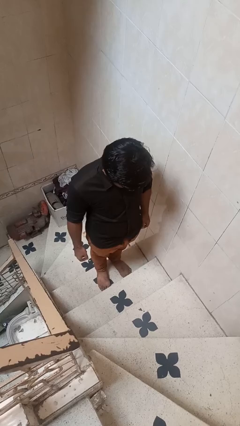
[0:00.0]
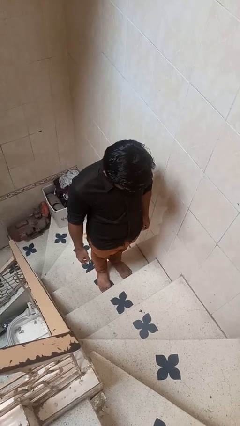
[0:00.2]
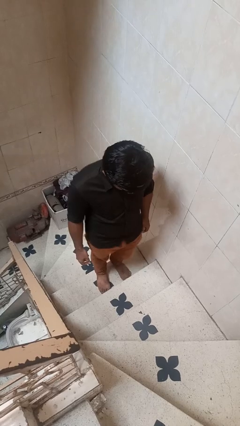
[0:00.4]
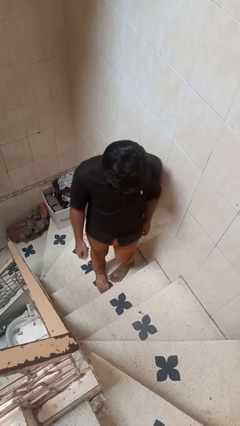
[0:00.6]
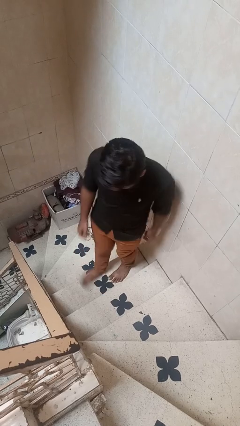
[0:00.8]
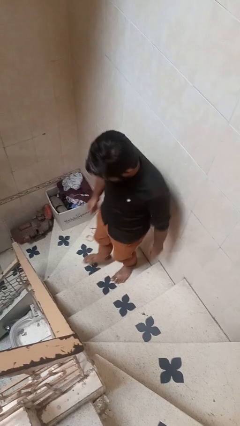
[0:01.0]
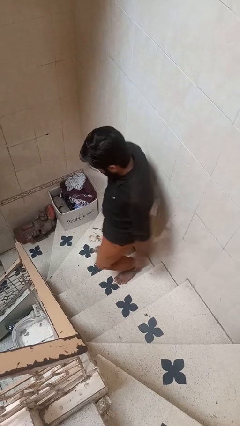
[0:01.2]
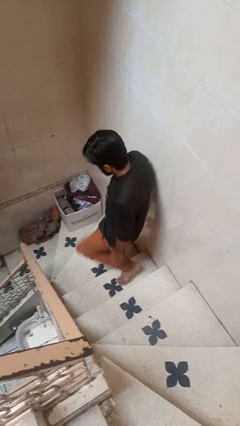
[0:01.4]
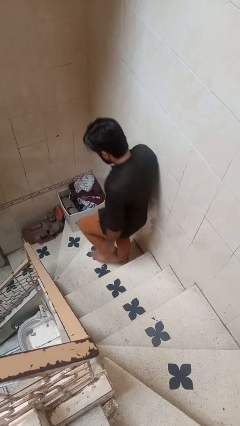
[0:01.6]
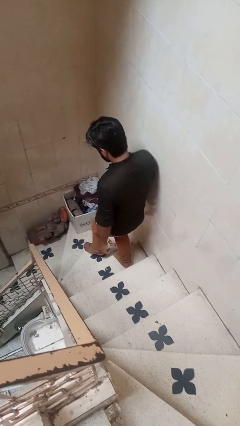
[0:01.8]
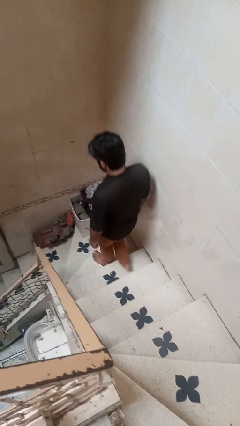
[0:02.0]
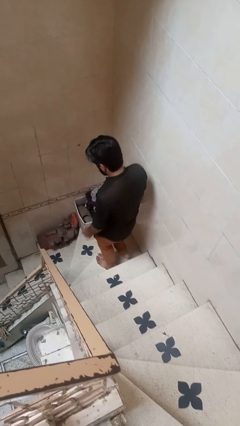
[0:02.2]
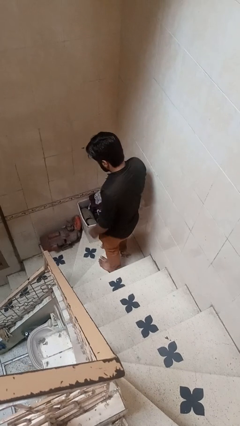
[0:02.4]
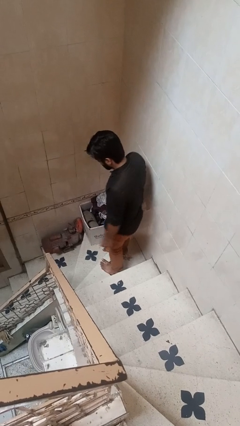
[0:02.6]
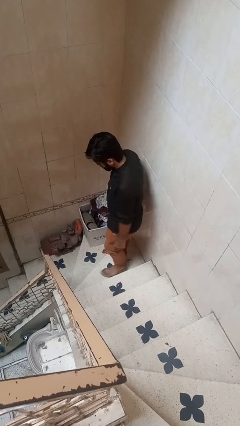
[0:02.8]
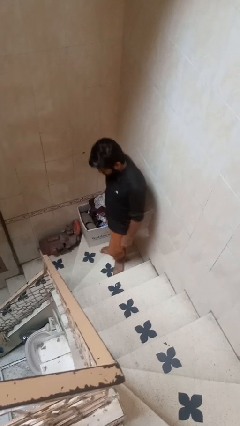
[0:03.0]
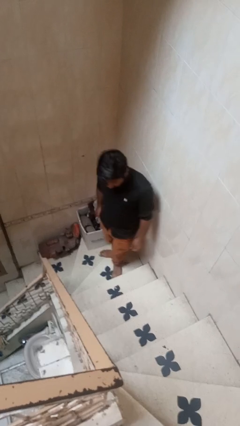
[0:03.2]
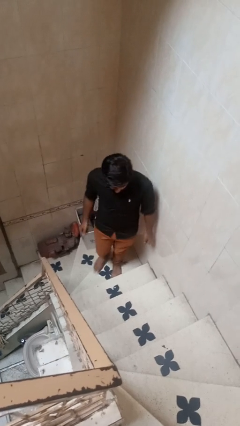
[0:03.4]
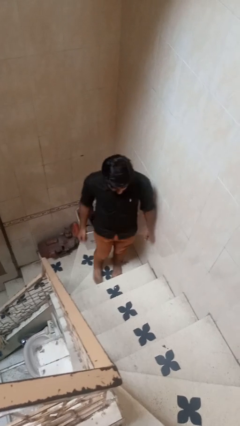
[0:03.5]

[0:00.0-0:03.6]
person climbs down stairs

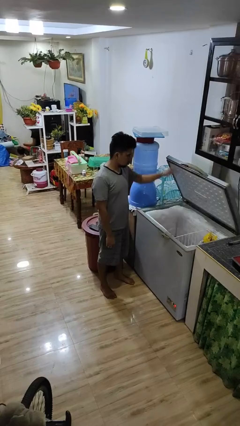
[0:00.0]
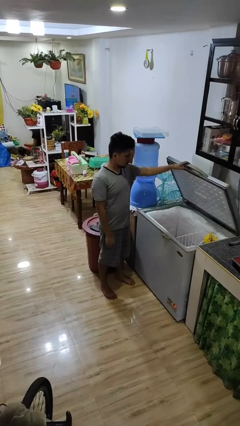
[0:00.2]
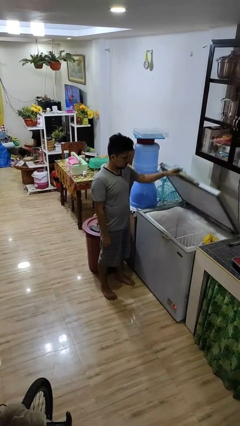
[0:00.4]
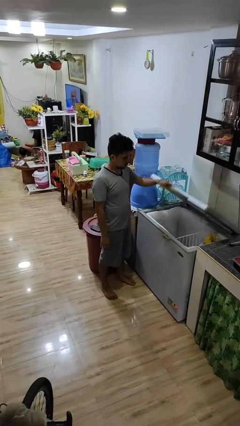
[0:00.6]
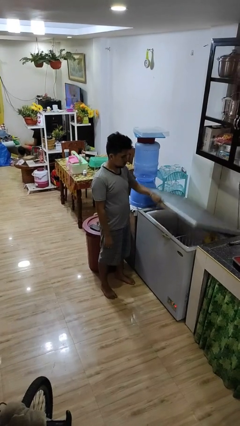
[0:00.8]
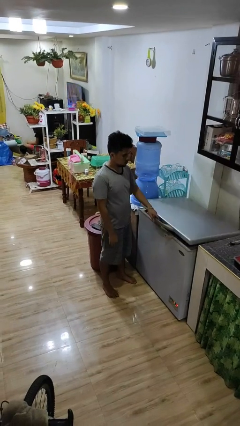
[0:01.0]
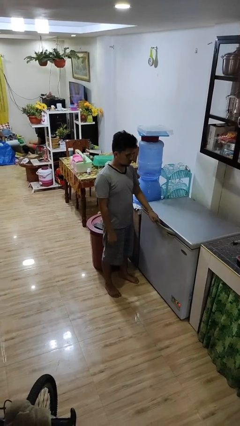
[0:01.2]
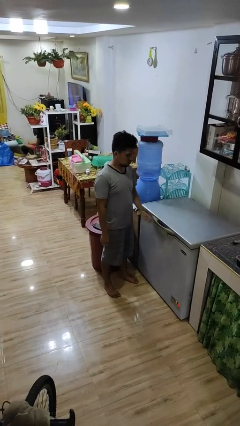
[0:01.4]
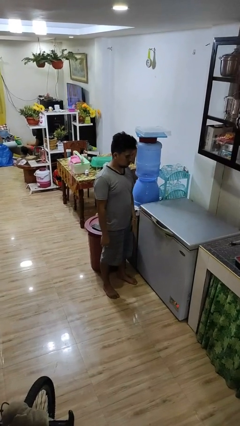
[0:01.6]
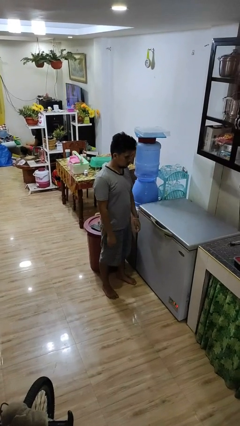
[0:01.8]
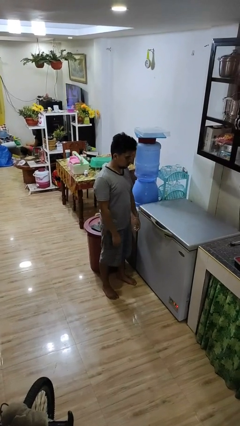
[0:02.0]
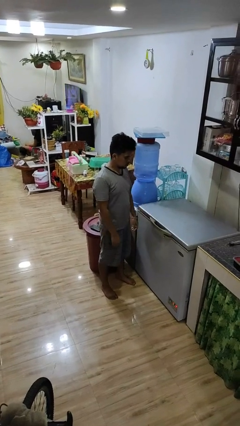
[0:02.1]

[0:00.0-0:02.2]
person closes refrigerator

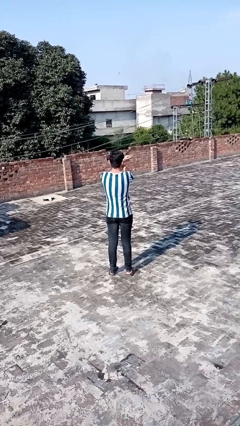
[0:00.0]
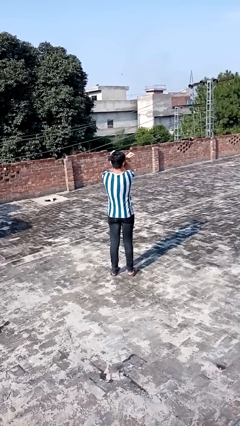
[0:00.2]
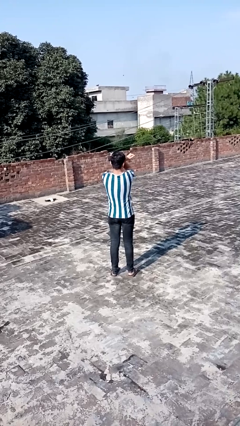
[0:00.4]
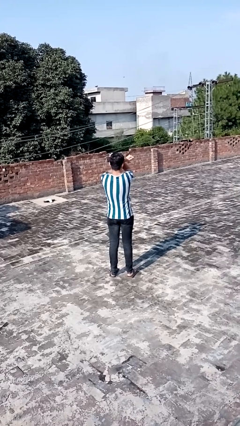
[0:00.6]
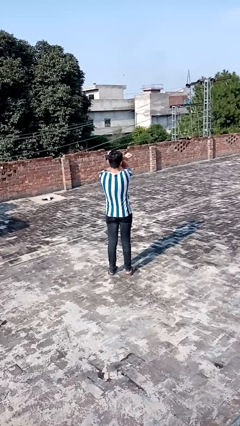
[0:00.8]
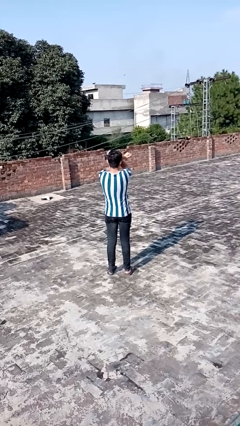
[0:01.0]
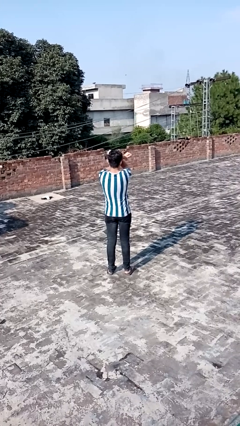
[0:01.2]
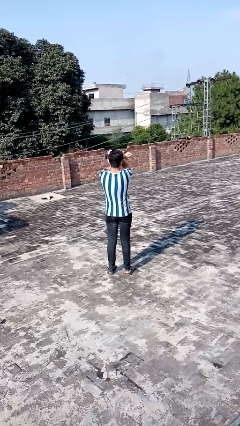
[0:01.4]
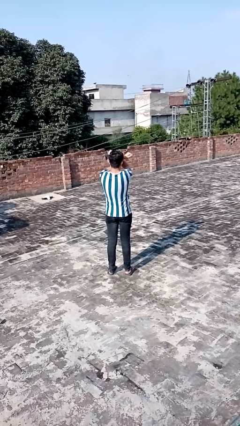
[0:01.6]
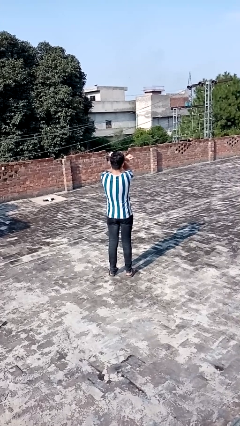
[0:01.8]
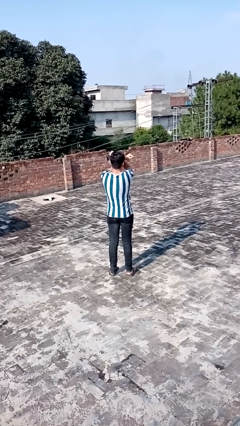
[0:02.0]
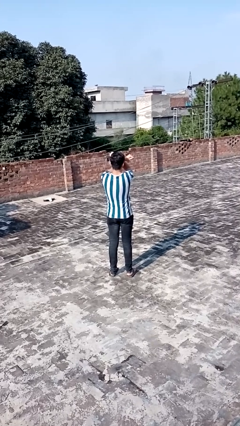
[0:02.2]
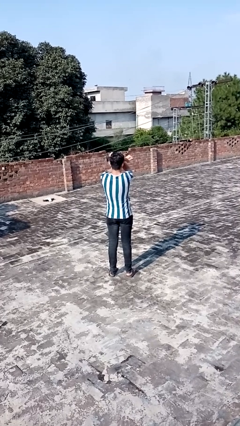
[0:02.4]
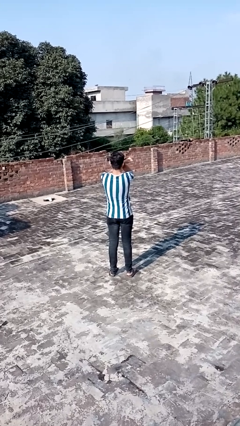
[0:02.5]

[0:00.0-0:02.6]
person gestures arms x

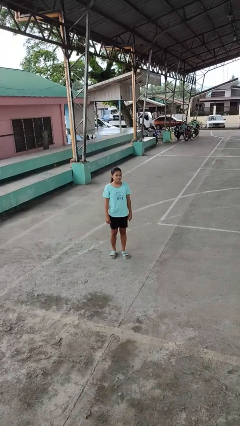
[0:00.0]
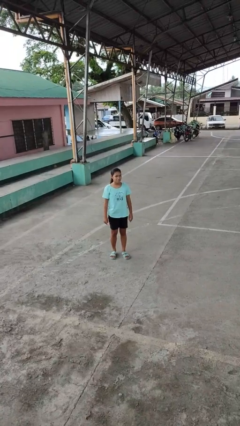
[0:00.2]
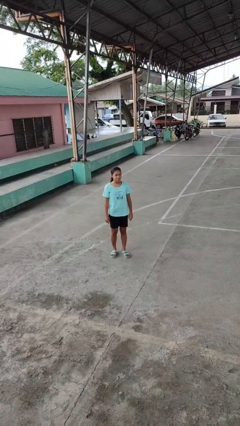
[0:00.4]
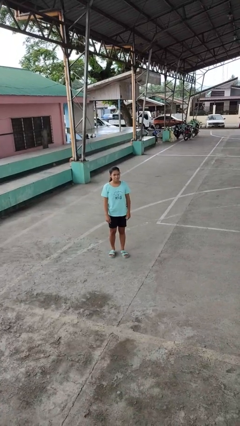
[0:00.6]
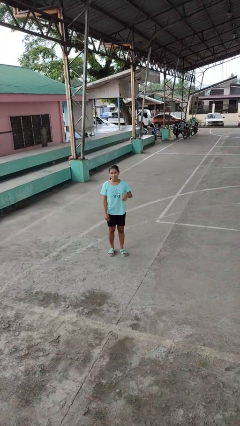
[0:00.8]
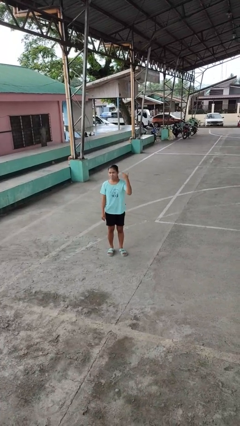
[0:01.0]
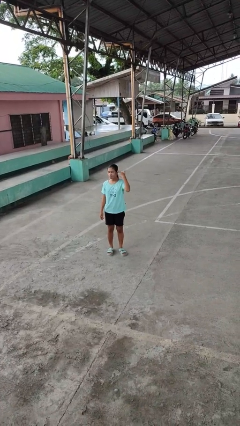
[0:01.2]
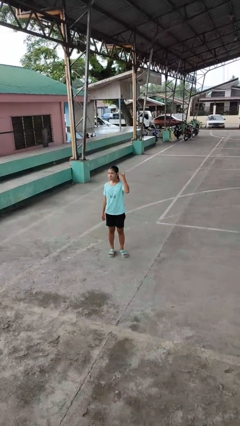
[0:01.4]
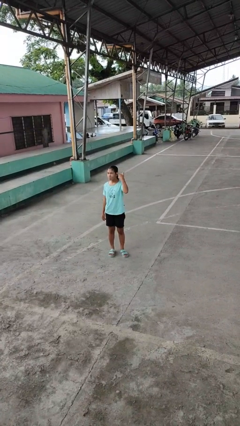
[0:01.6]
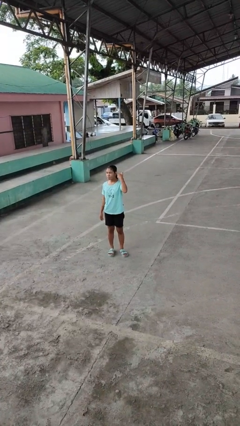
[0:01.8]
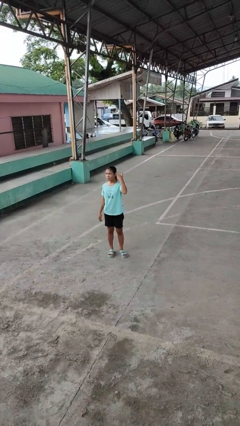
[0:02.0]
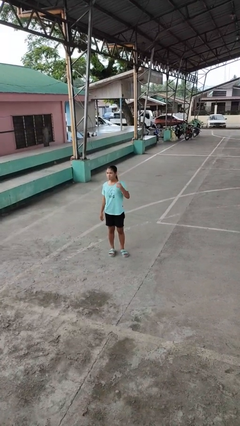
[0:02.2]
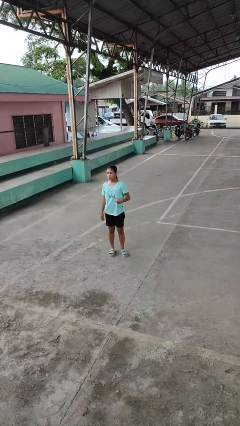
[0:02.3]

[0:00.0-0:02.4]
person gestures listen closely

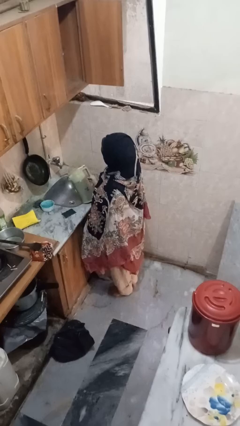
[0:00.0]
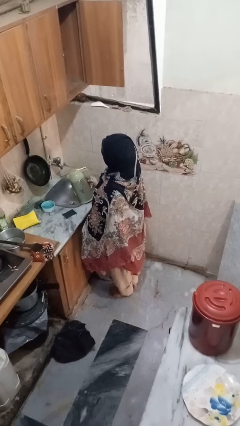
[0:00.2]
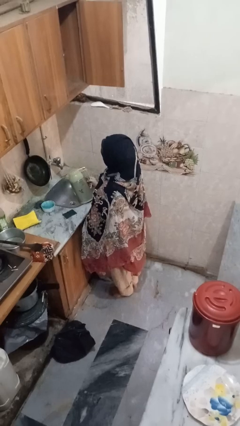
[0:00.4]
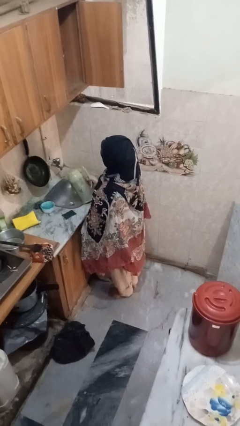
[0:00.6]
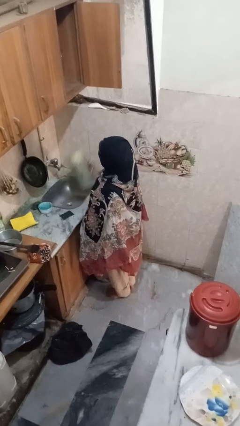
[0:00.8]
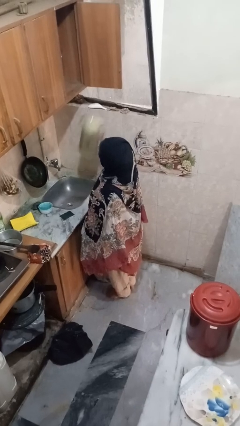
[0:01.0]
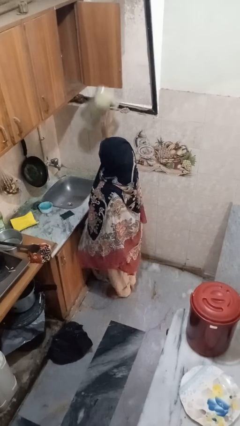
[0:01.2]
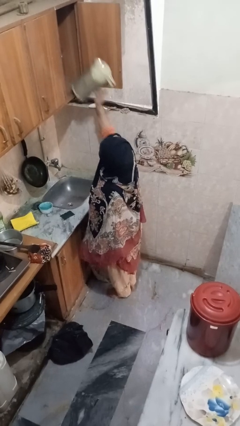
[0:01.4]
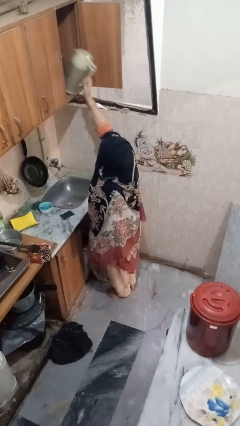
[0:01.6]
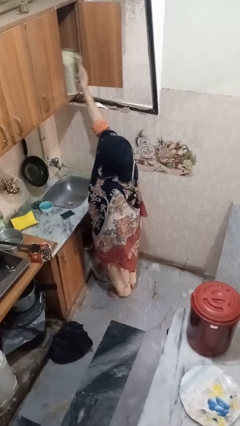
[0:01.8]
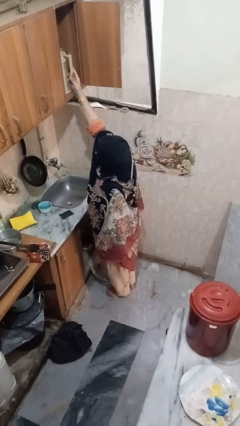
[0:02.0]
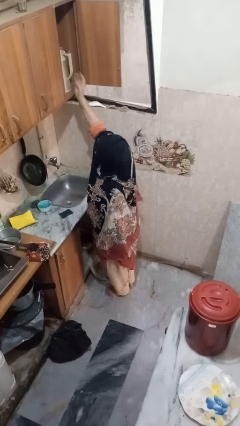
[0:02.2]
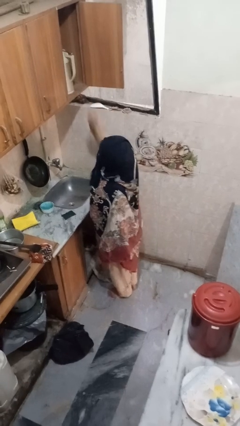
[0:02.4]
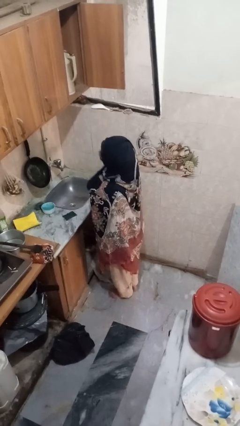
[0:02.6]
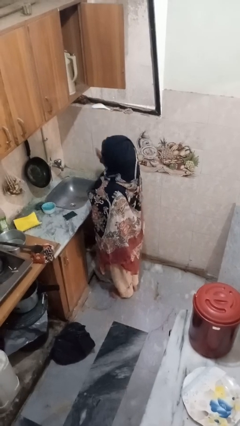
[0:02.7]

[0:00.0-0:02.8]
person takes object from cabinet

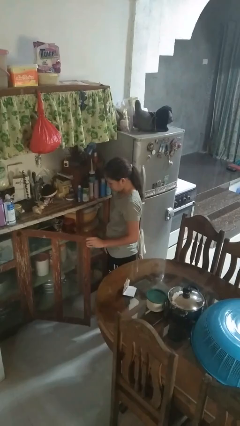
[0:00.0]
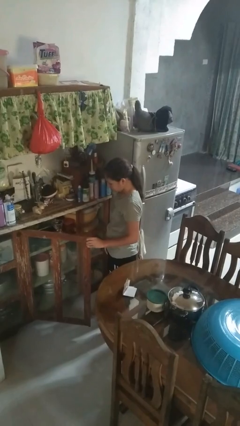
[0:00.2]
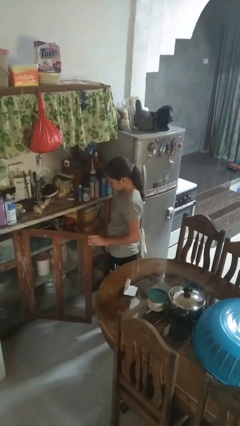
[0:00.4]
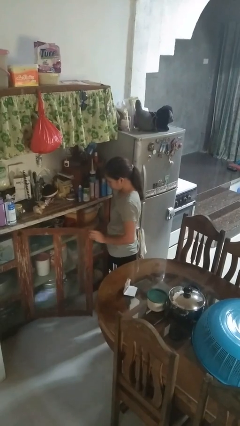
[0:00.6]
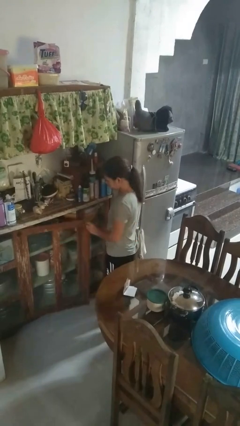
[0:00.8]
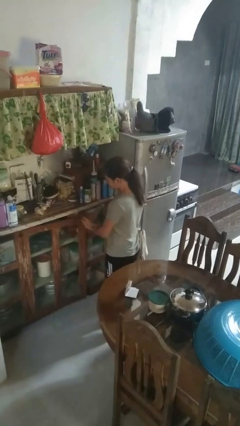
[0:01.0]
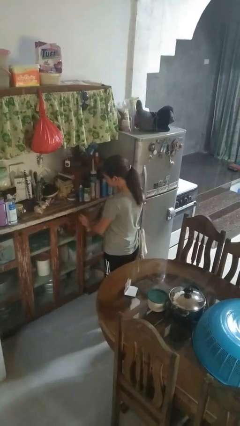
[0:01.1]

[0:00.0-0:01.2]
person closes cabinet

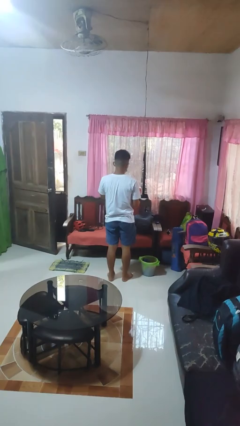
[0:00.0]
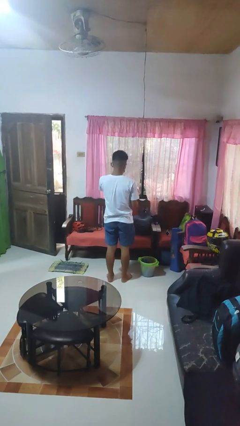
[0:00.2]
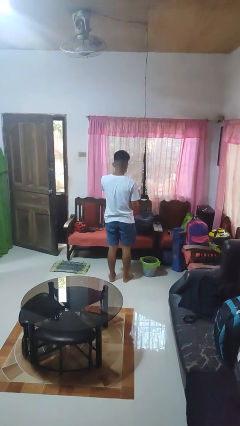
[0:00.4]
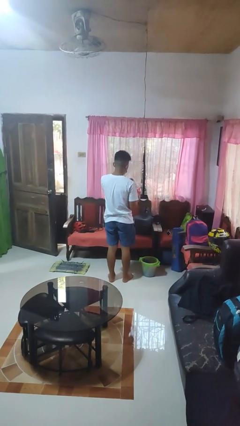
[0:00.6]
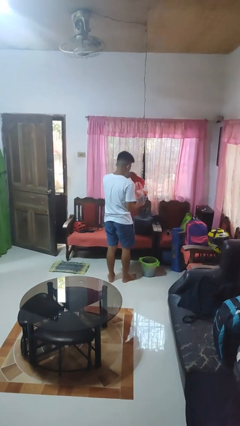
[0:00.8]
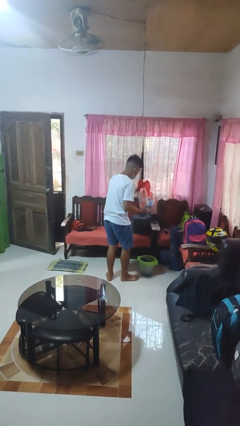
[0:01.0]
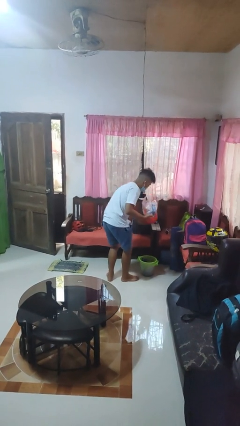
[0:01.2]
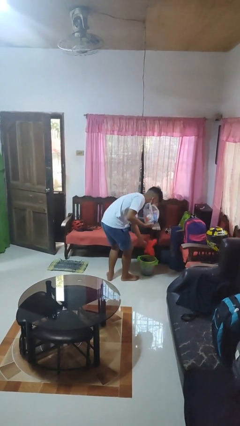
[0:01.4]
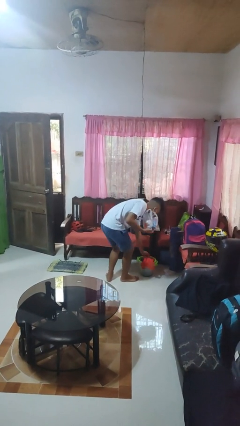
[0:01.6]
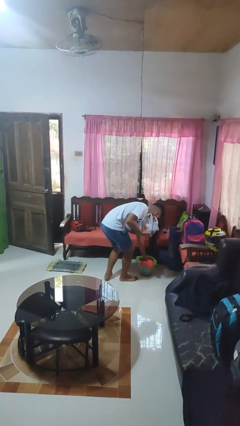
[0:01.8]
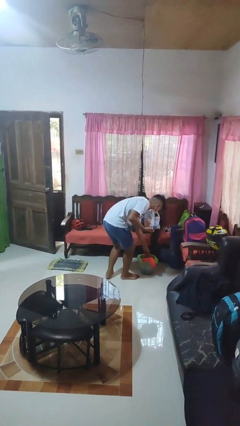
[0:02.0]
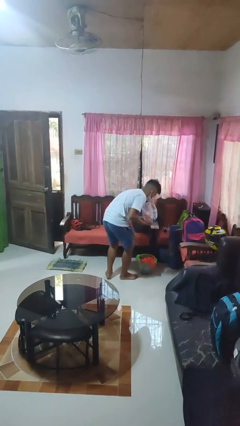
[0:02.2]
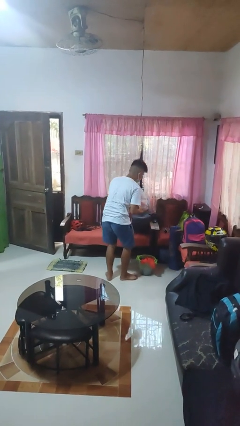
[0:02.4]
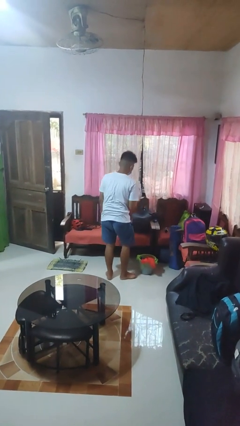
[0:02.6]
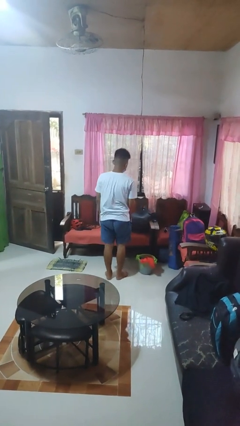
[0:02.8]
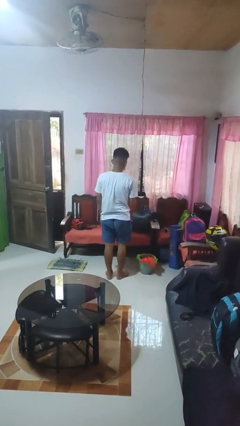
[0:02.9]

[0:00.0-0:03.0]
person discards trash
